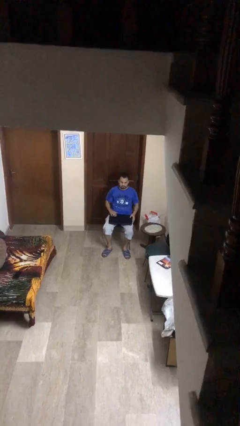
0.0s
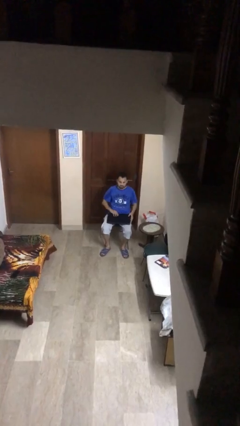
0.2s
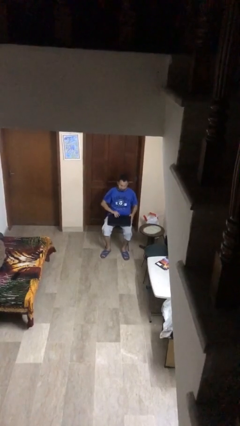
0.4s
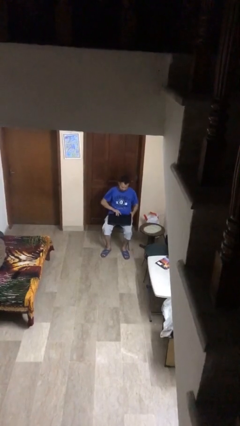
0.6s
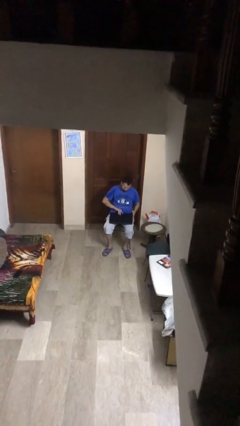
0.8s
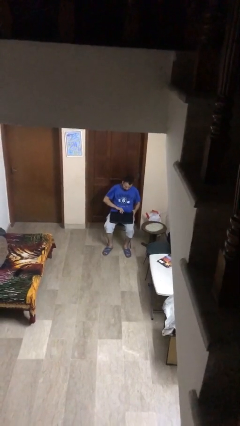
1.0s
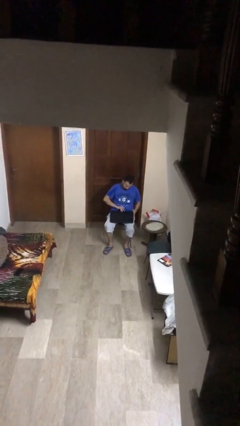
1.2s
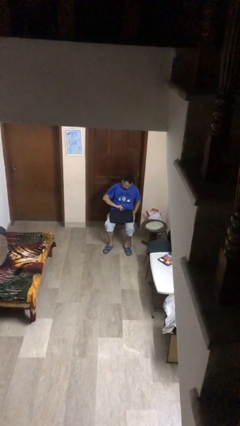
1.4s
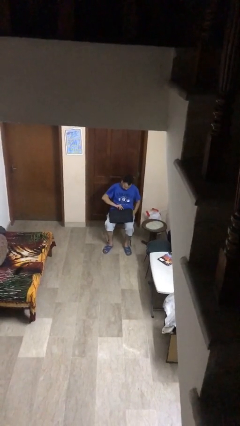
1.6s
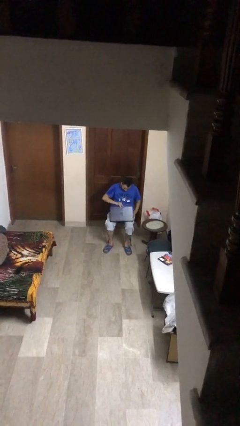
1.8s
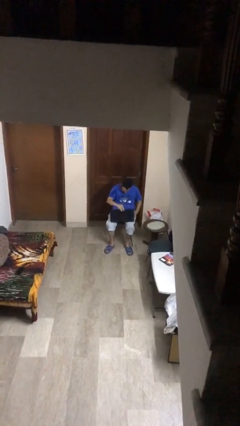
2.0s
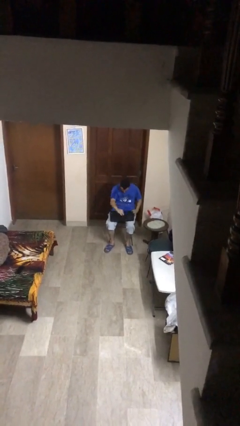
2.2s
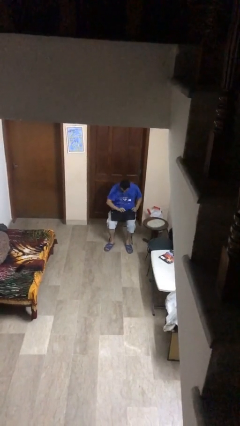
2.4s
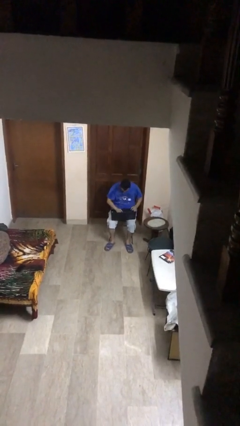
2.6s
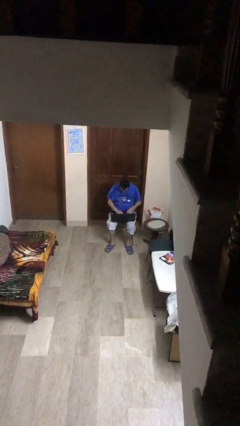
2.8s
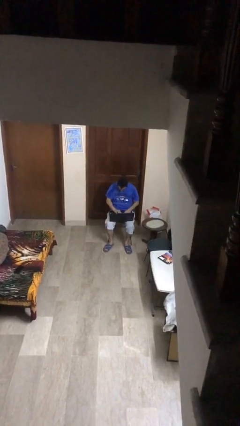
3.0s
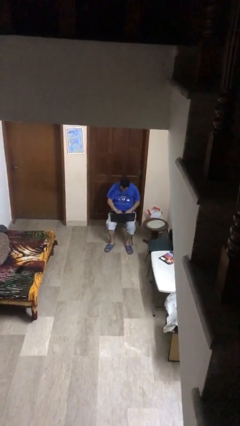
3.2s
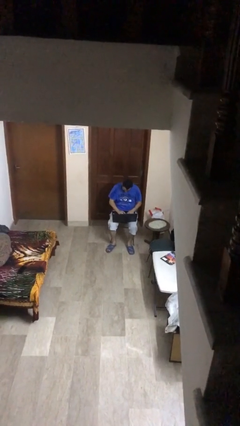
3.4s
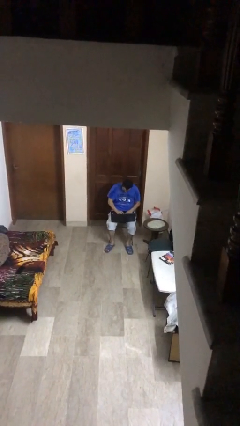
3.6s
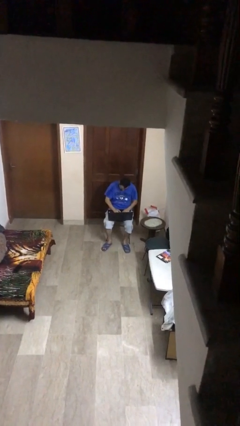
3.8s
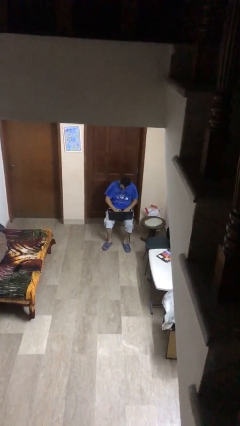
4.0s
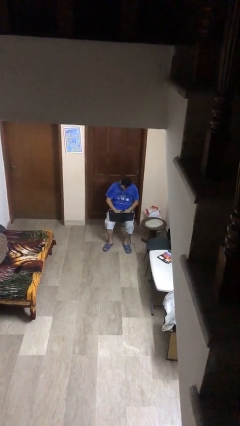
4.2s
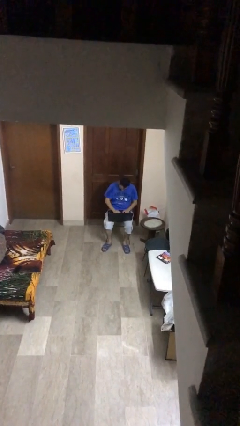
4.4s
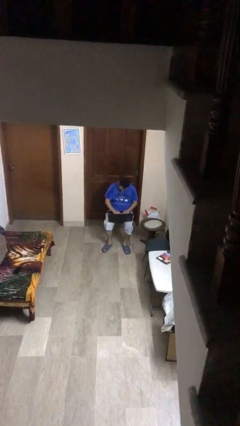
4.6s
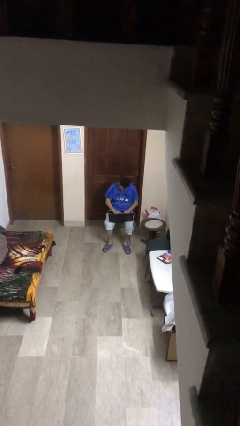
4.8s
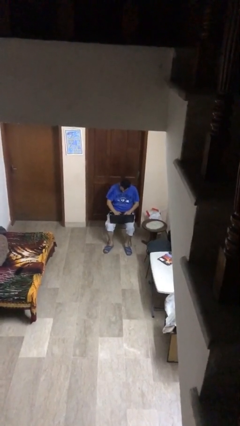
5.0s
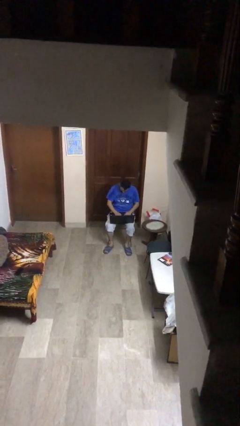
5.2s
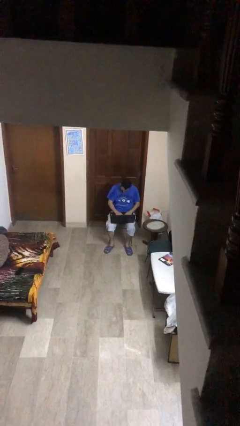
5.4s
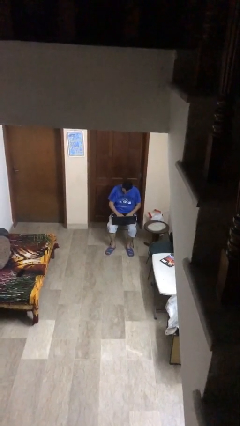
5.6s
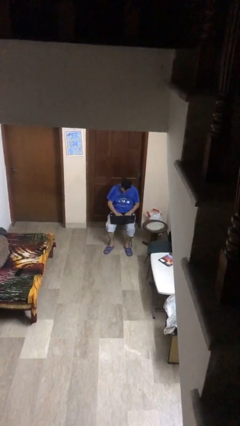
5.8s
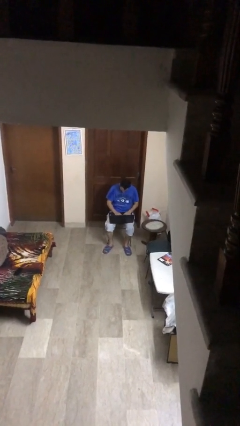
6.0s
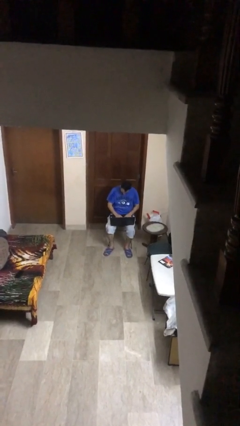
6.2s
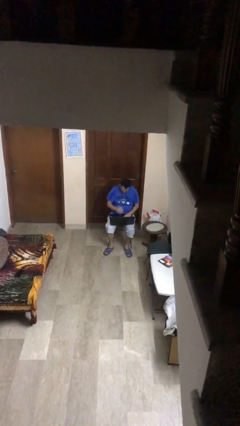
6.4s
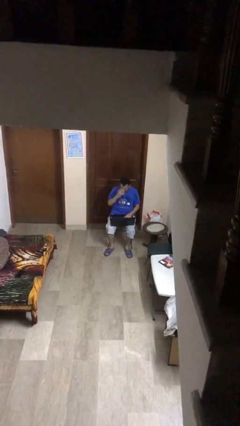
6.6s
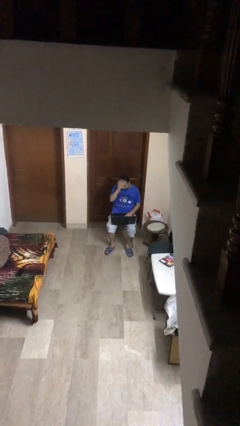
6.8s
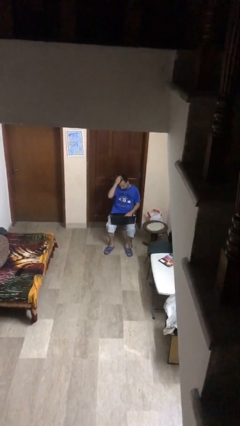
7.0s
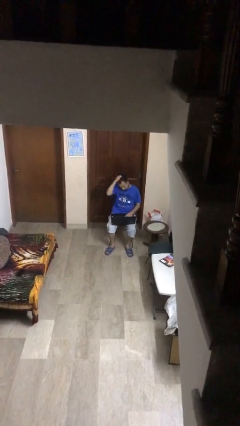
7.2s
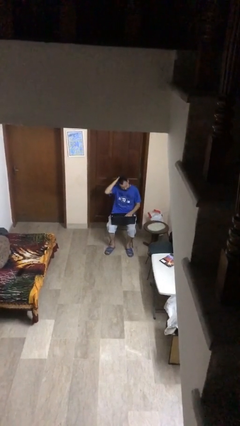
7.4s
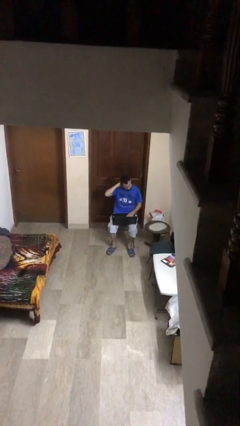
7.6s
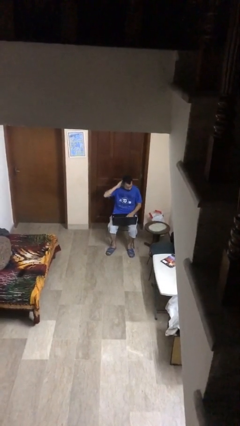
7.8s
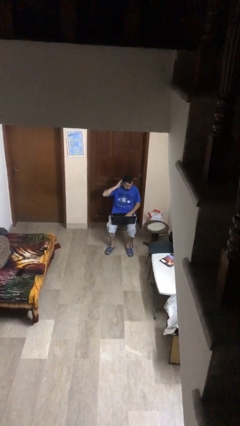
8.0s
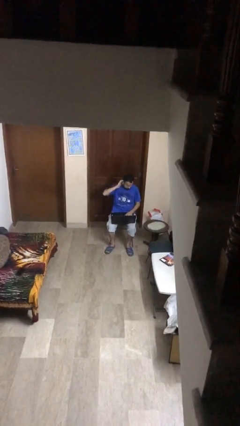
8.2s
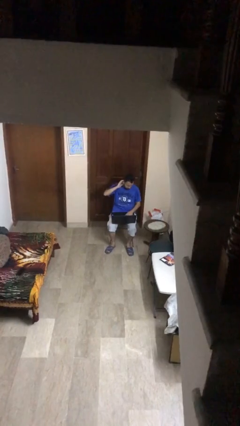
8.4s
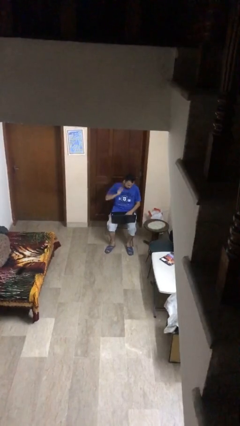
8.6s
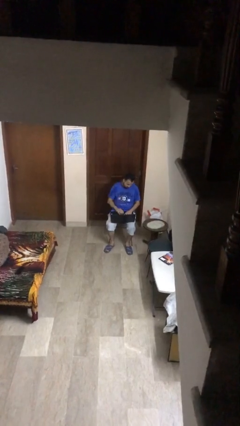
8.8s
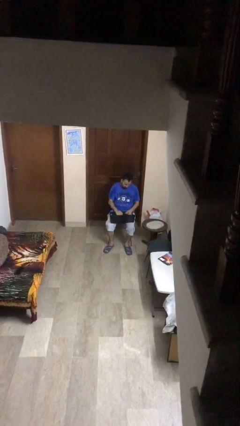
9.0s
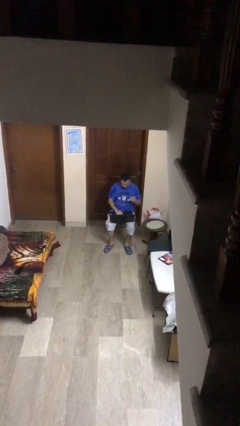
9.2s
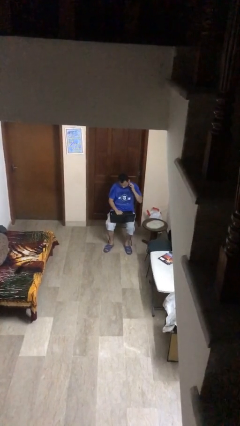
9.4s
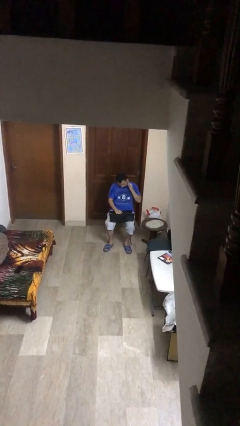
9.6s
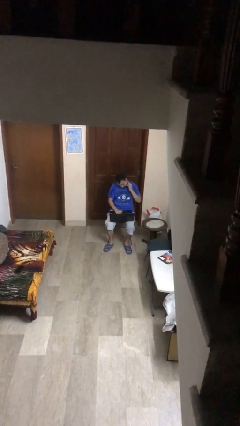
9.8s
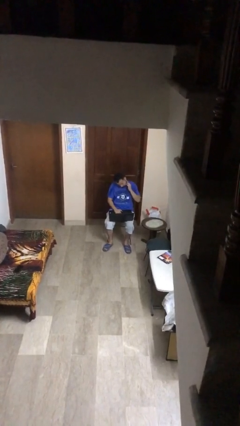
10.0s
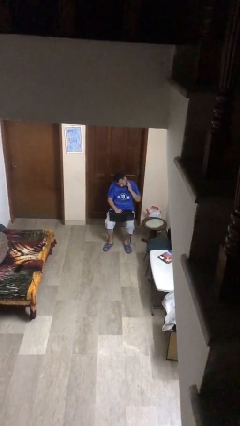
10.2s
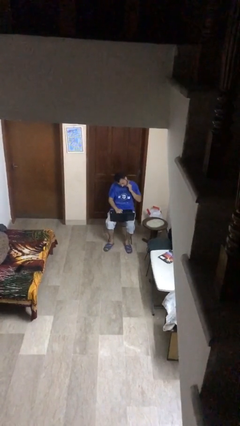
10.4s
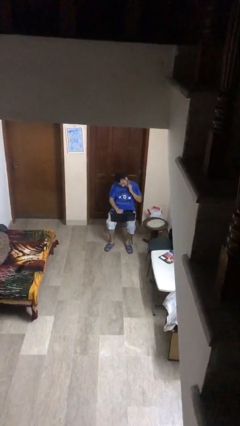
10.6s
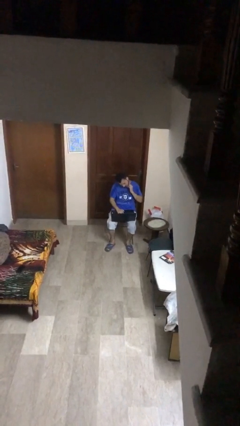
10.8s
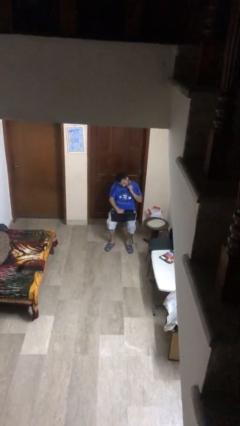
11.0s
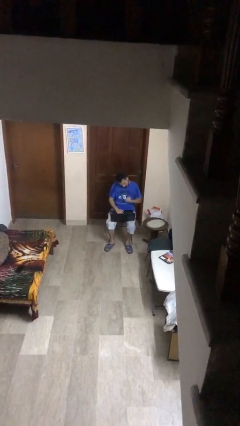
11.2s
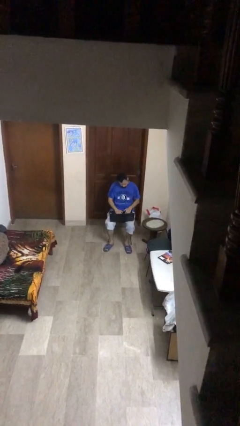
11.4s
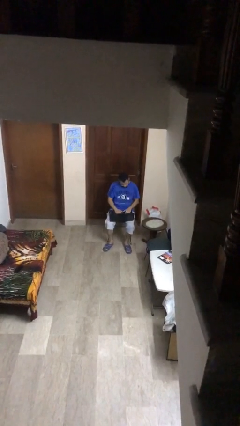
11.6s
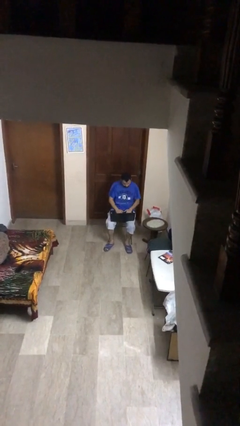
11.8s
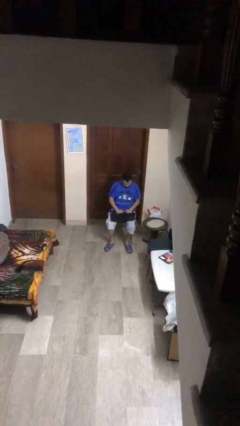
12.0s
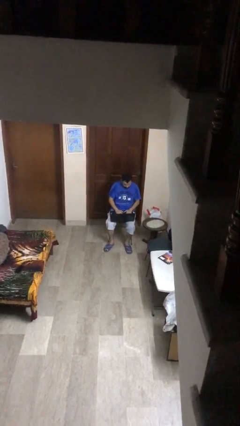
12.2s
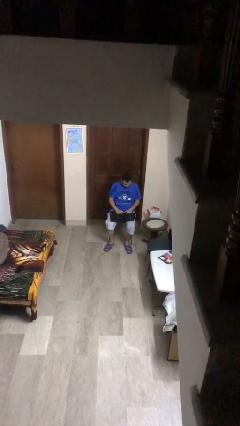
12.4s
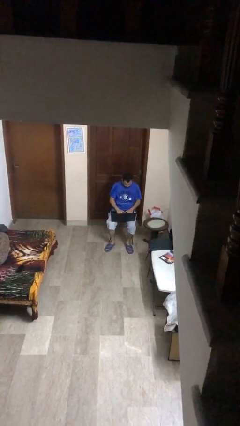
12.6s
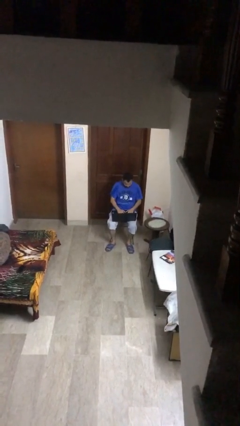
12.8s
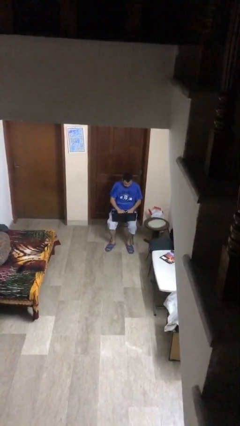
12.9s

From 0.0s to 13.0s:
person interacts with laptop

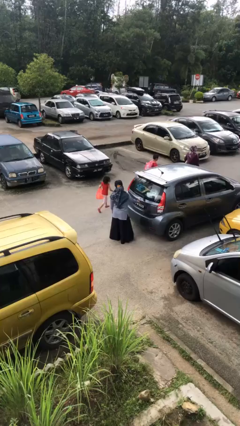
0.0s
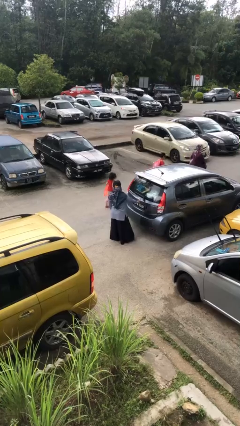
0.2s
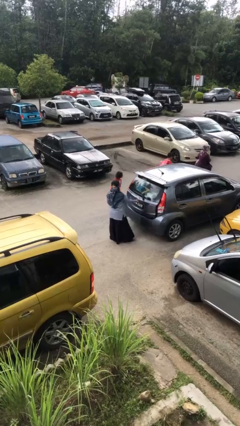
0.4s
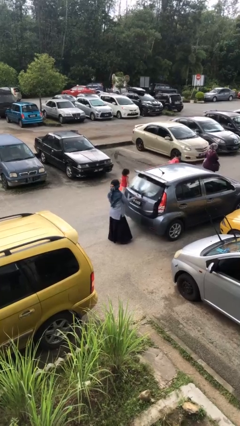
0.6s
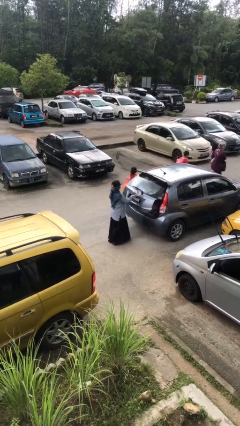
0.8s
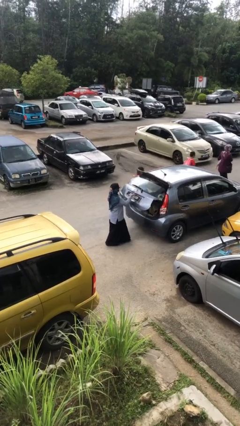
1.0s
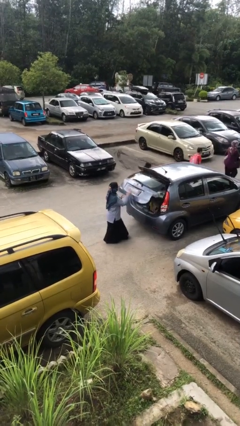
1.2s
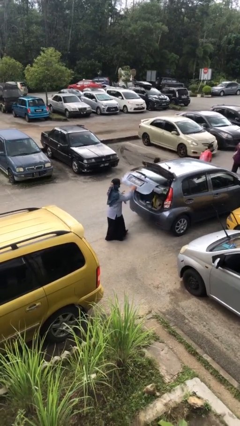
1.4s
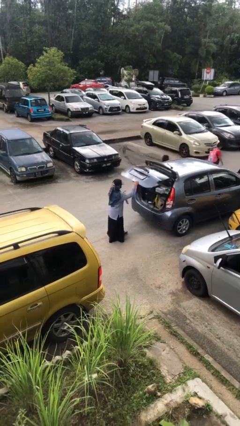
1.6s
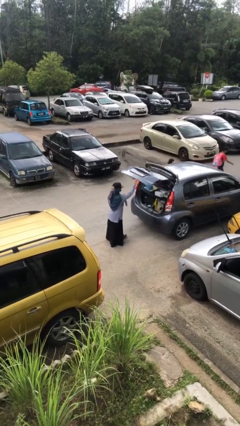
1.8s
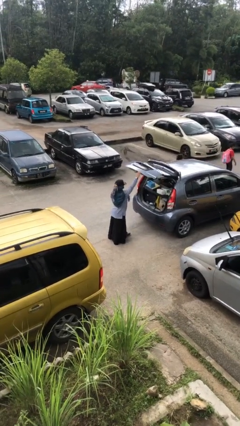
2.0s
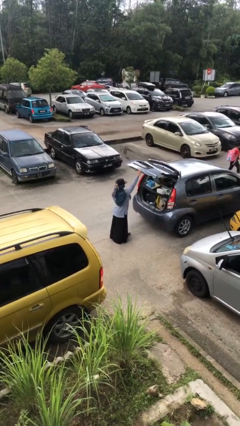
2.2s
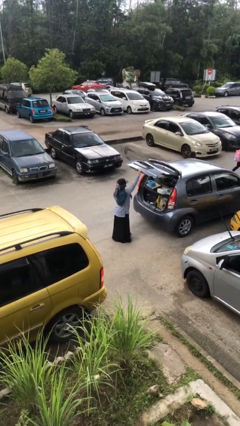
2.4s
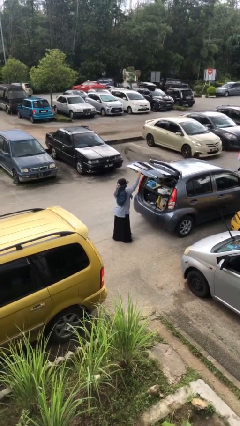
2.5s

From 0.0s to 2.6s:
person opens car trunk

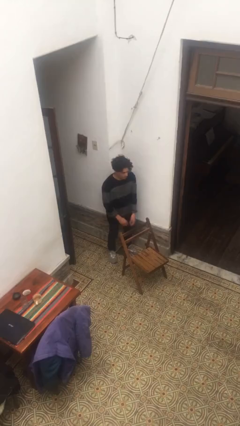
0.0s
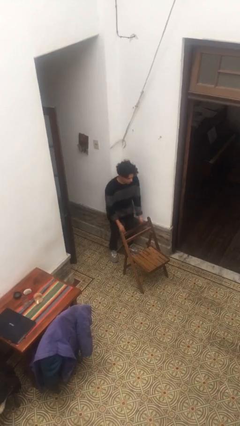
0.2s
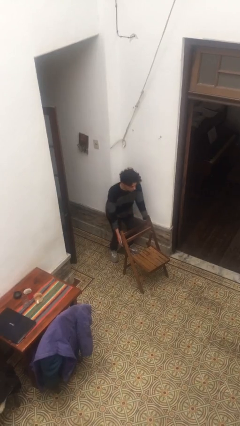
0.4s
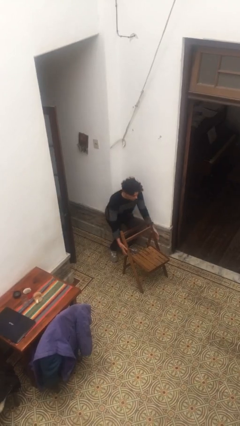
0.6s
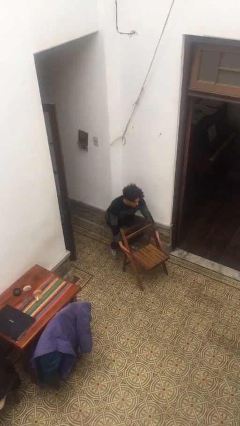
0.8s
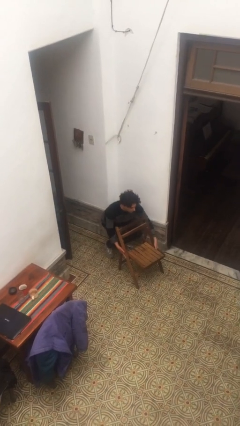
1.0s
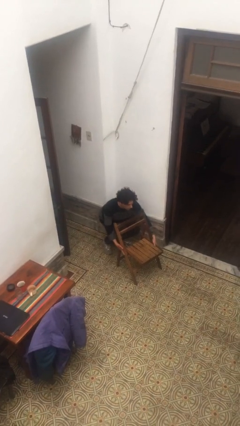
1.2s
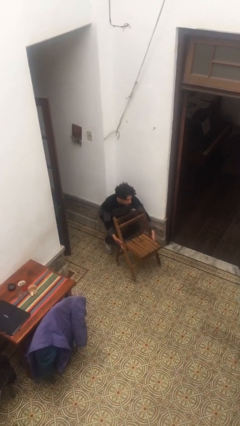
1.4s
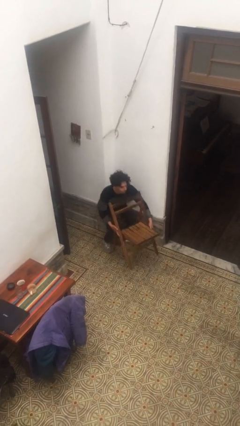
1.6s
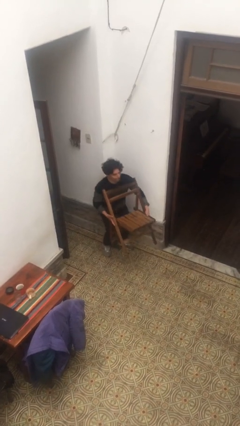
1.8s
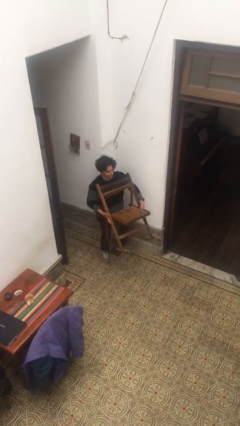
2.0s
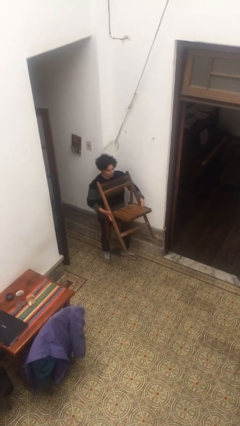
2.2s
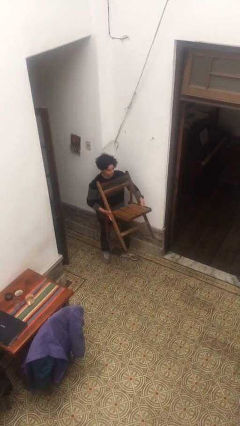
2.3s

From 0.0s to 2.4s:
person picks up object from floor
